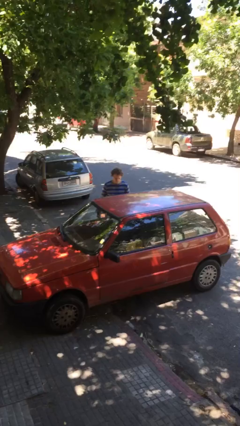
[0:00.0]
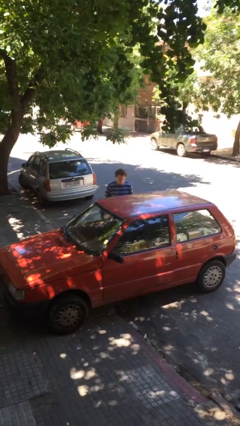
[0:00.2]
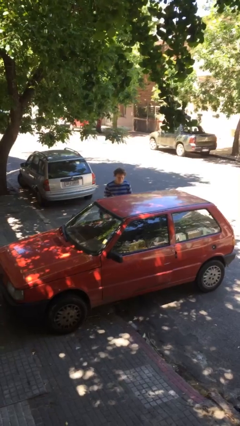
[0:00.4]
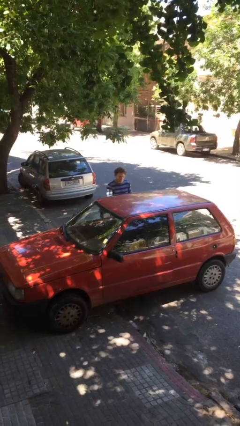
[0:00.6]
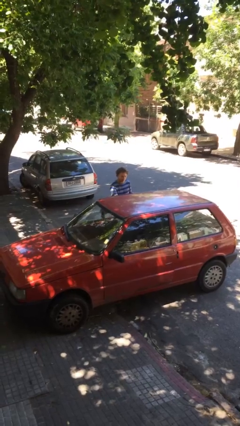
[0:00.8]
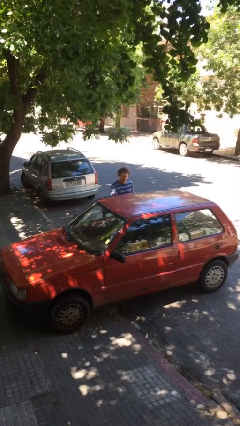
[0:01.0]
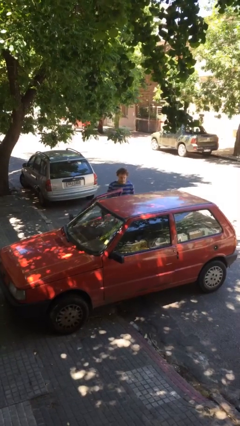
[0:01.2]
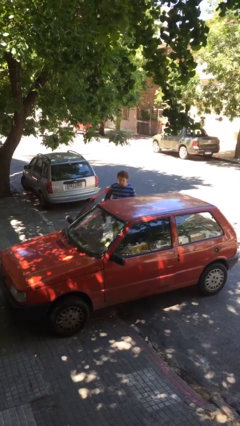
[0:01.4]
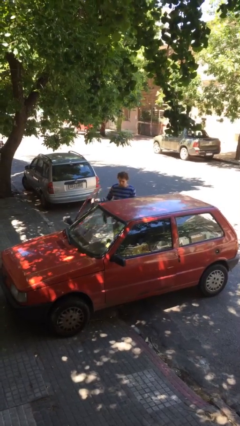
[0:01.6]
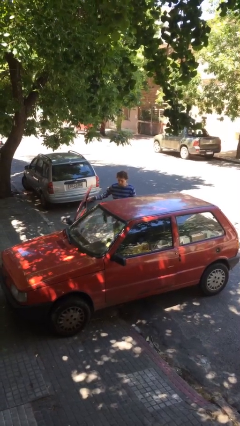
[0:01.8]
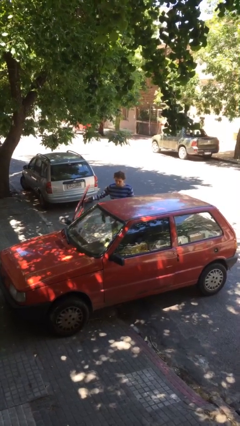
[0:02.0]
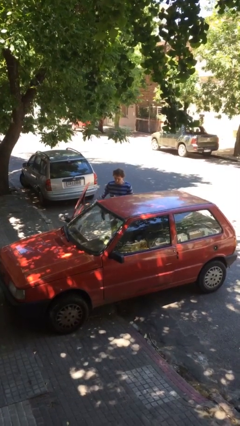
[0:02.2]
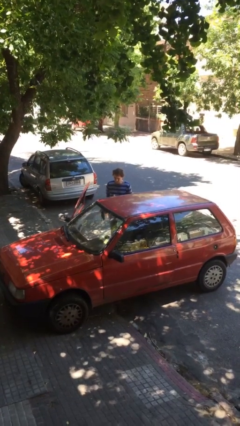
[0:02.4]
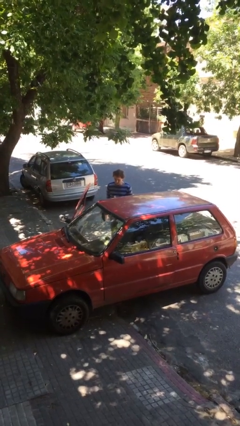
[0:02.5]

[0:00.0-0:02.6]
person opens car door

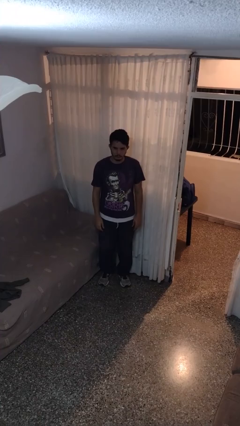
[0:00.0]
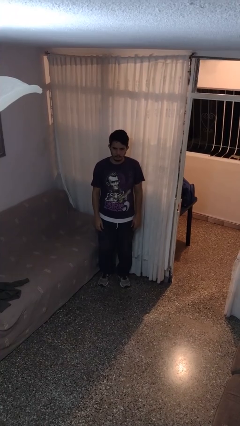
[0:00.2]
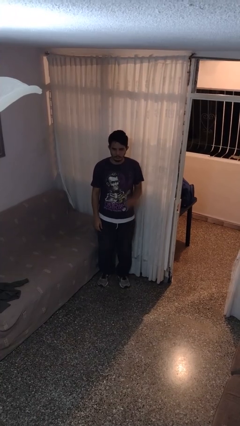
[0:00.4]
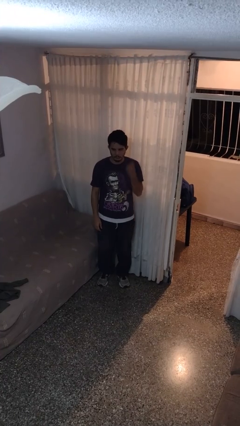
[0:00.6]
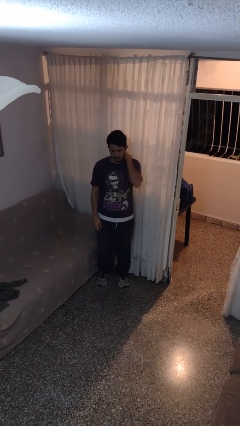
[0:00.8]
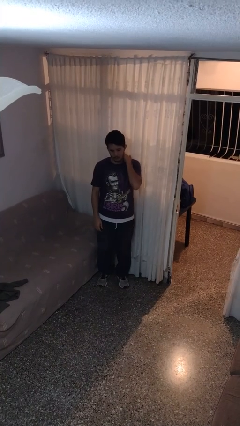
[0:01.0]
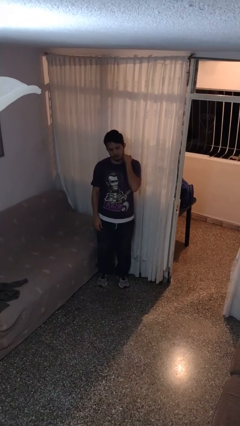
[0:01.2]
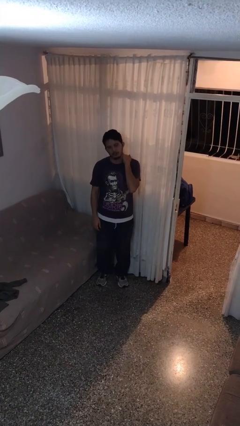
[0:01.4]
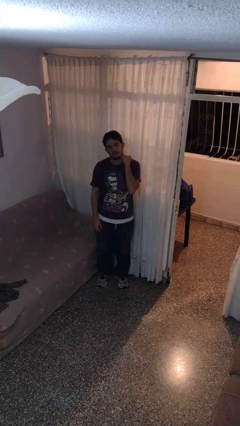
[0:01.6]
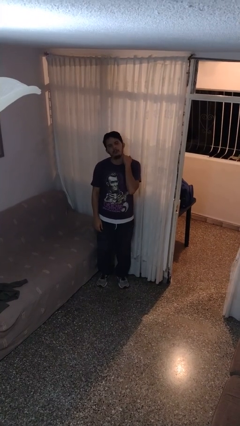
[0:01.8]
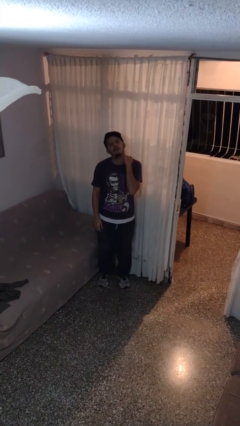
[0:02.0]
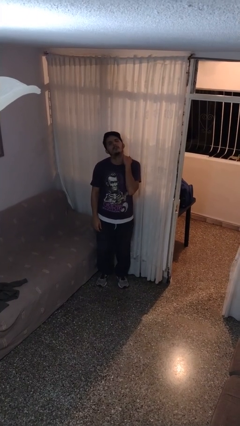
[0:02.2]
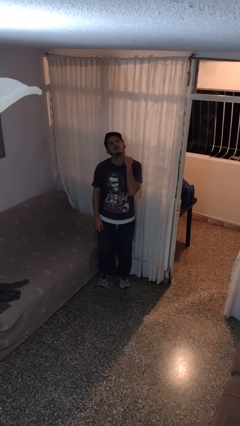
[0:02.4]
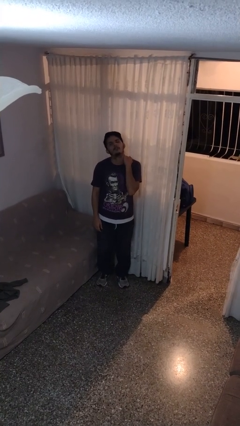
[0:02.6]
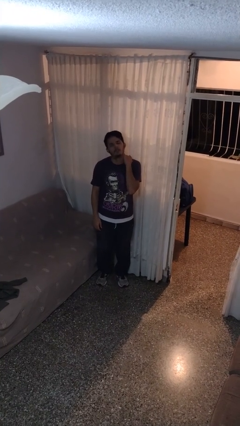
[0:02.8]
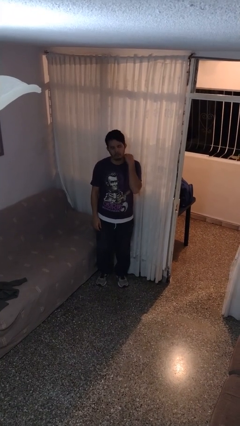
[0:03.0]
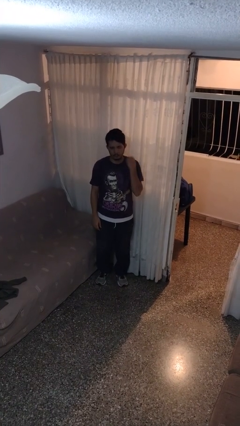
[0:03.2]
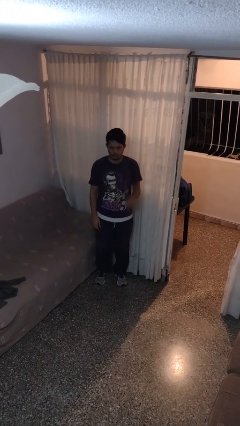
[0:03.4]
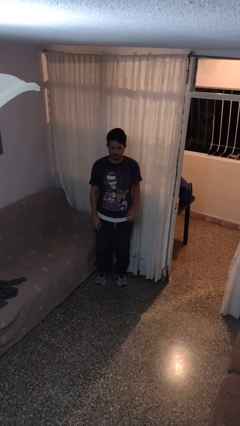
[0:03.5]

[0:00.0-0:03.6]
person rubs neck

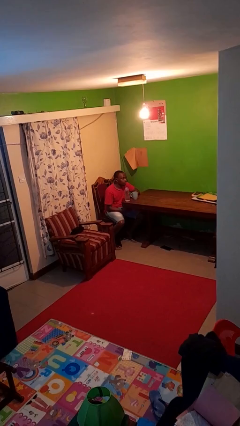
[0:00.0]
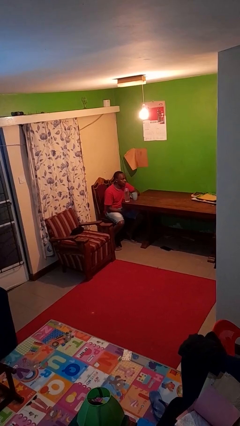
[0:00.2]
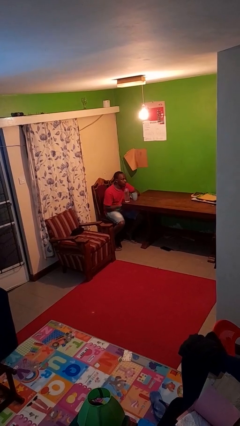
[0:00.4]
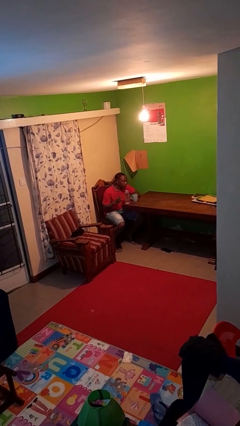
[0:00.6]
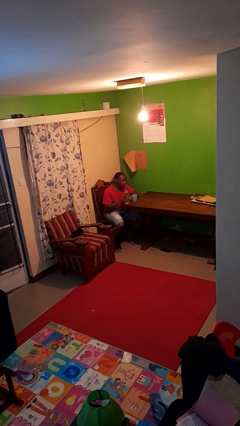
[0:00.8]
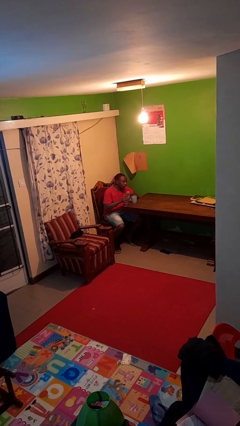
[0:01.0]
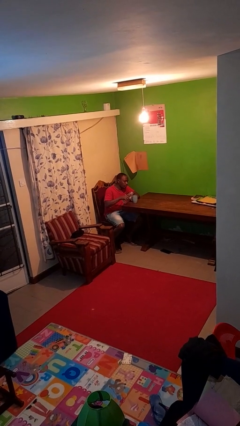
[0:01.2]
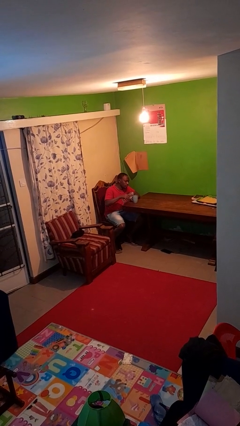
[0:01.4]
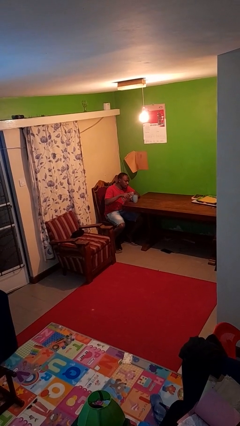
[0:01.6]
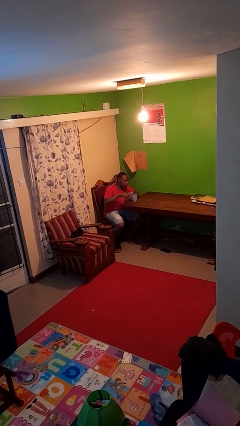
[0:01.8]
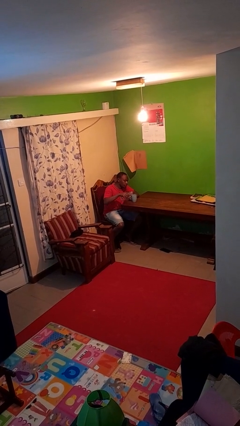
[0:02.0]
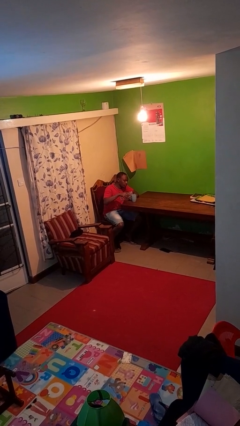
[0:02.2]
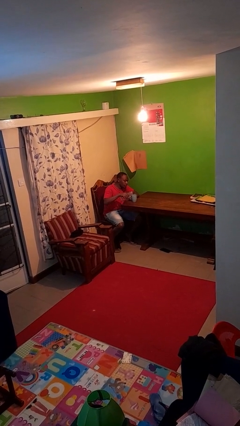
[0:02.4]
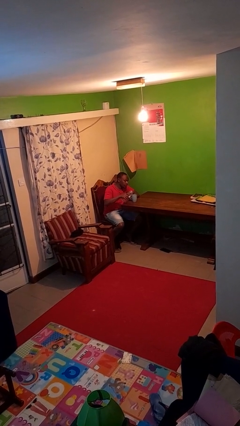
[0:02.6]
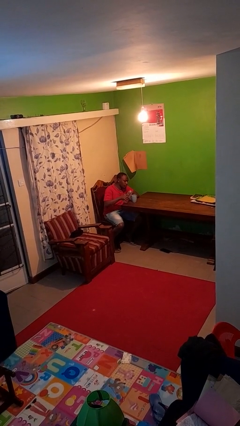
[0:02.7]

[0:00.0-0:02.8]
person pours liquid into cup

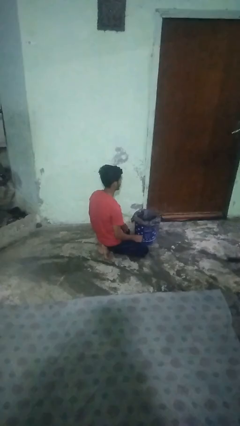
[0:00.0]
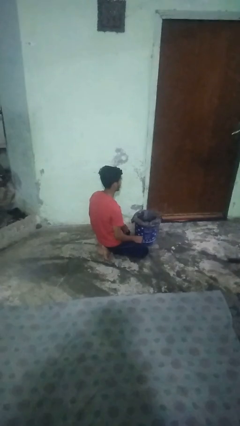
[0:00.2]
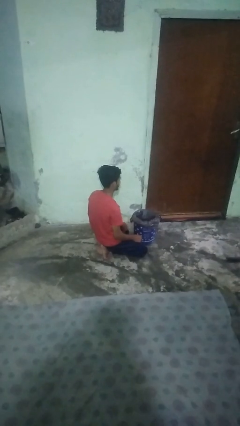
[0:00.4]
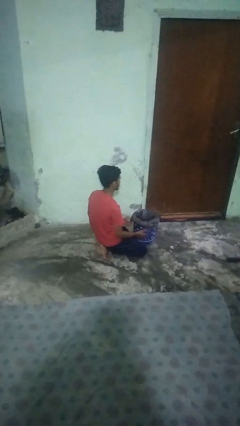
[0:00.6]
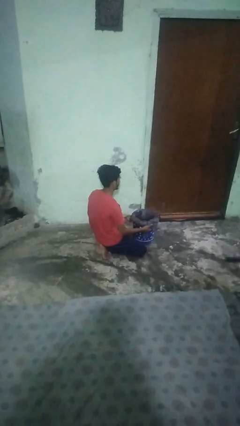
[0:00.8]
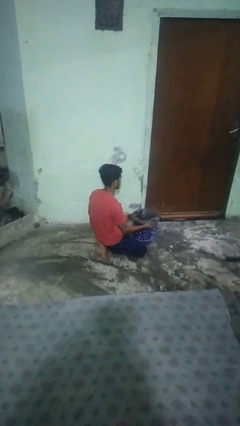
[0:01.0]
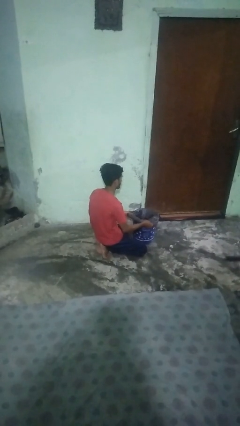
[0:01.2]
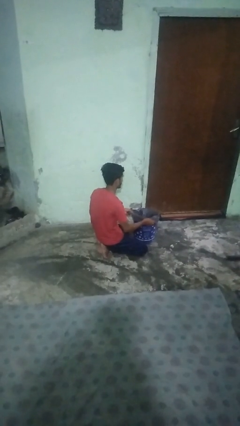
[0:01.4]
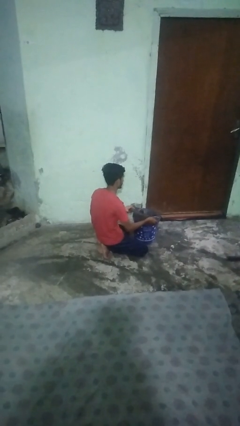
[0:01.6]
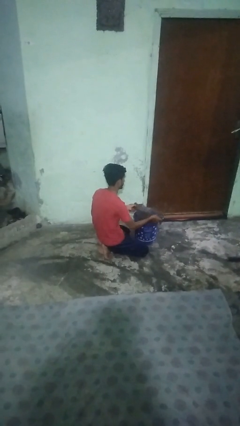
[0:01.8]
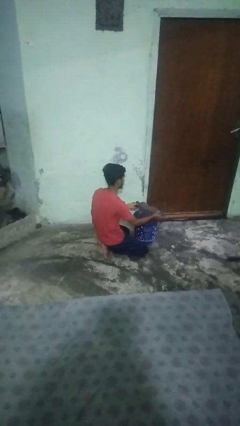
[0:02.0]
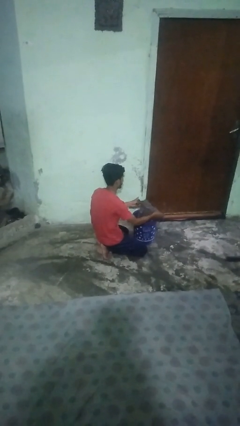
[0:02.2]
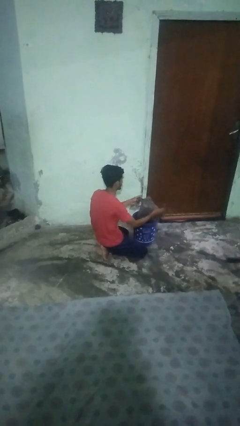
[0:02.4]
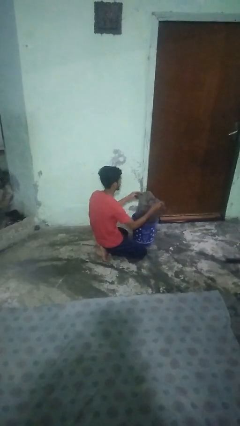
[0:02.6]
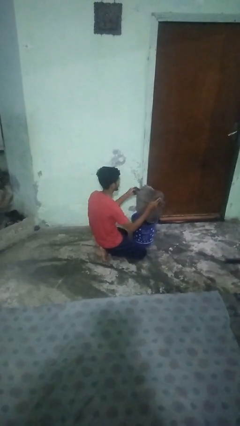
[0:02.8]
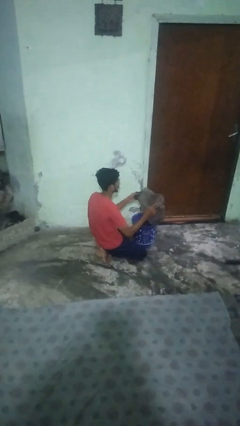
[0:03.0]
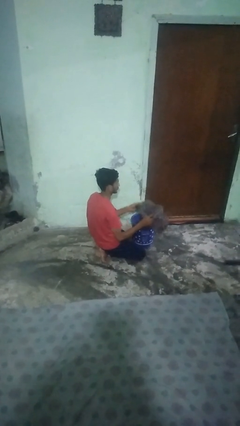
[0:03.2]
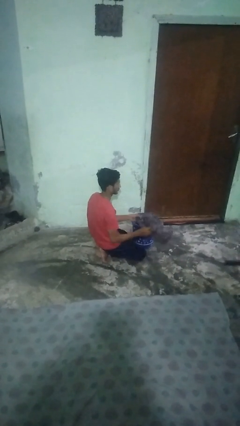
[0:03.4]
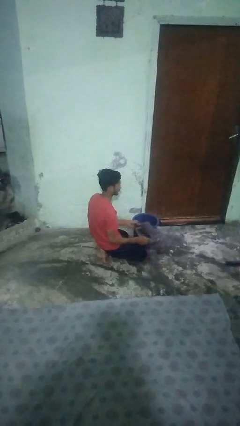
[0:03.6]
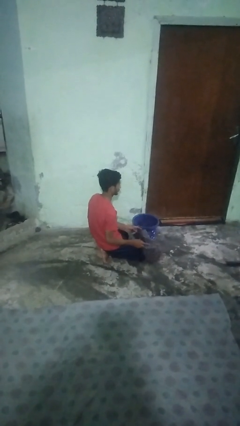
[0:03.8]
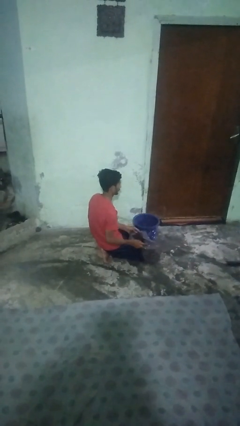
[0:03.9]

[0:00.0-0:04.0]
person removes trashbag from trashcan

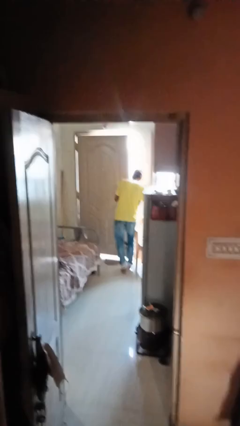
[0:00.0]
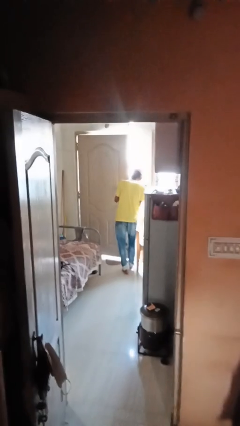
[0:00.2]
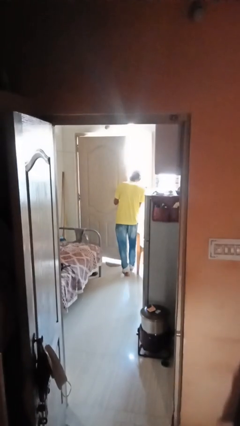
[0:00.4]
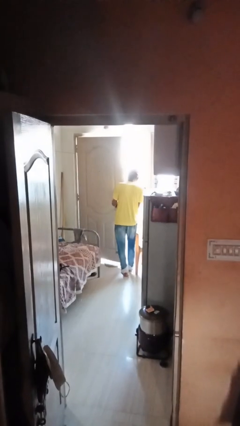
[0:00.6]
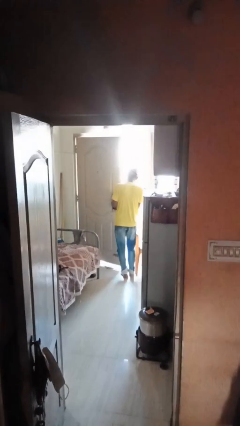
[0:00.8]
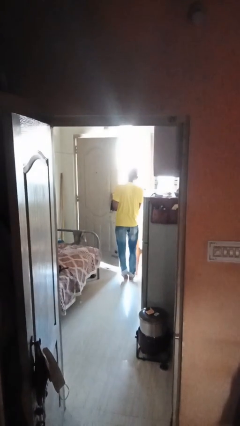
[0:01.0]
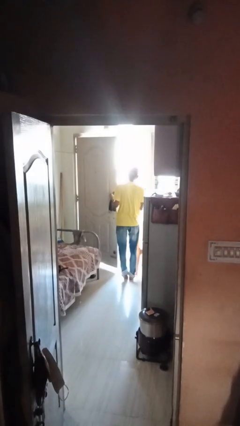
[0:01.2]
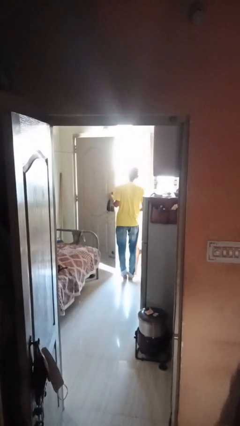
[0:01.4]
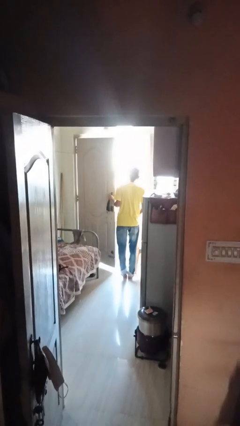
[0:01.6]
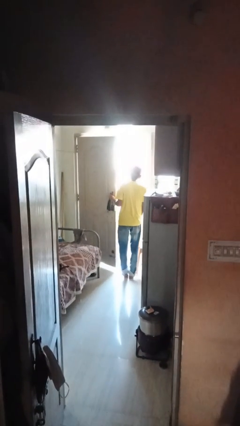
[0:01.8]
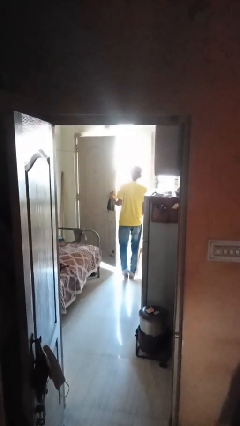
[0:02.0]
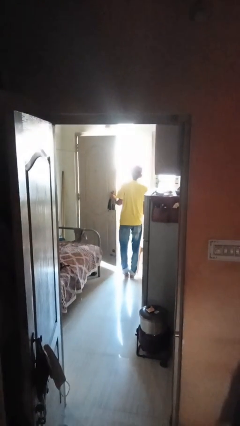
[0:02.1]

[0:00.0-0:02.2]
person opens facility door

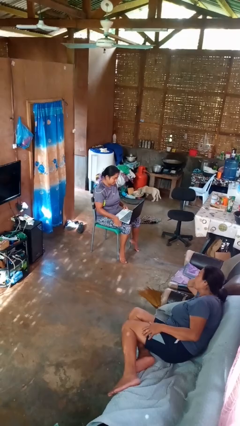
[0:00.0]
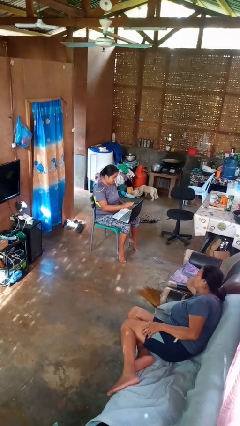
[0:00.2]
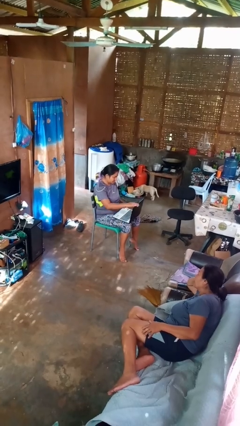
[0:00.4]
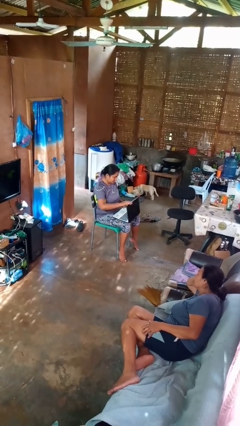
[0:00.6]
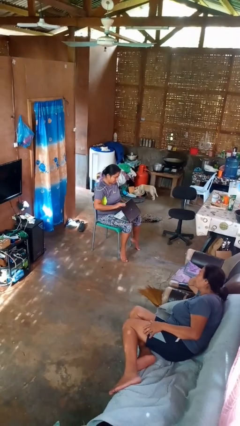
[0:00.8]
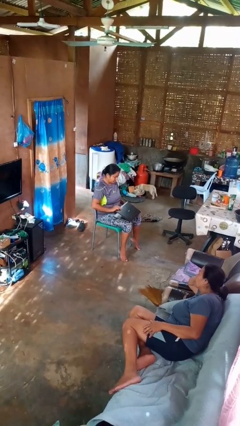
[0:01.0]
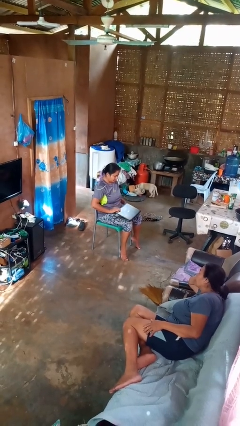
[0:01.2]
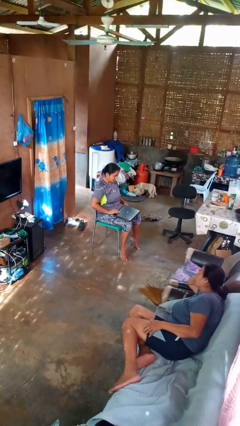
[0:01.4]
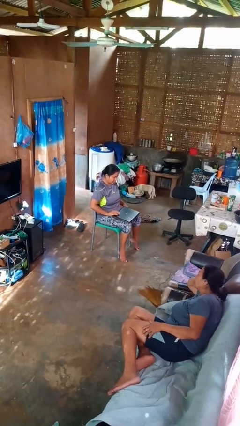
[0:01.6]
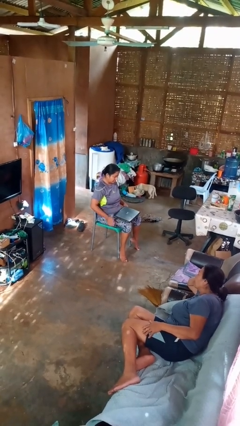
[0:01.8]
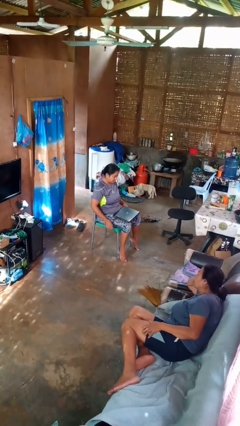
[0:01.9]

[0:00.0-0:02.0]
person closes laptop
